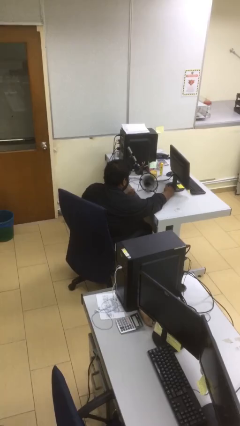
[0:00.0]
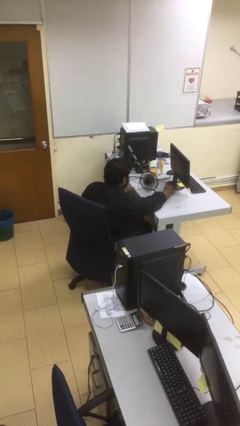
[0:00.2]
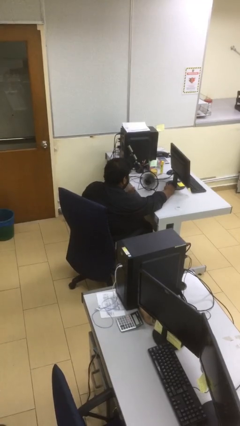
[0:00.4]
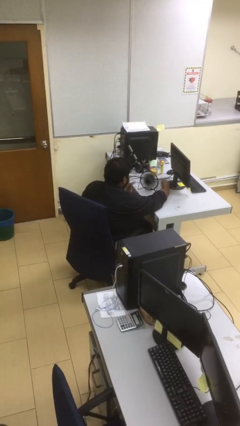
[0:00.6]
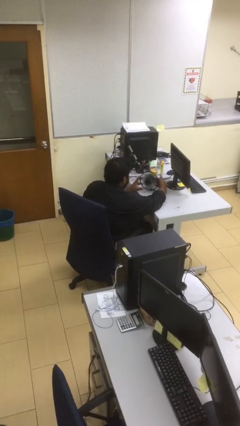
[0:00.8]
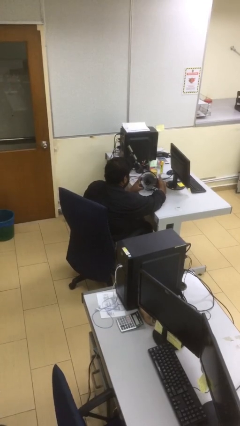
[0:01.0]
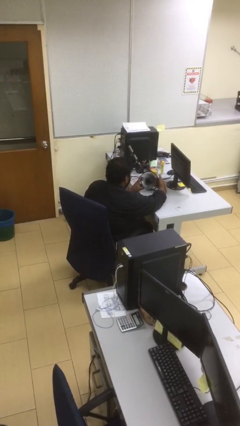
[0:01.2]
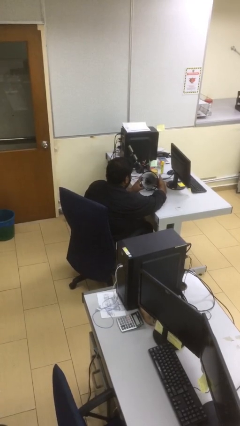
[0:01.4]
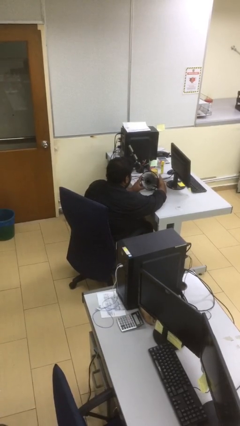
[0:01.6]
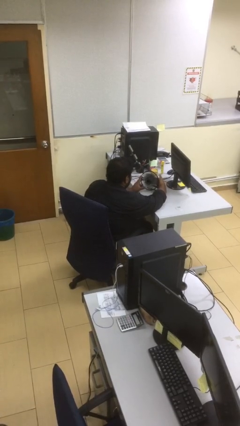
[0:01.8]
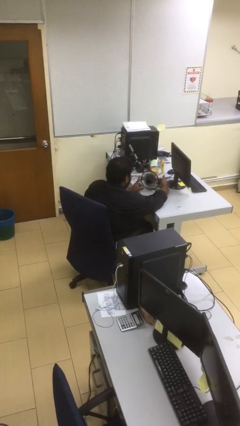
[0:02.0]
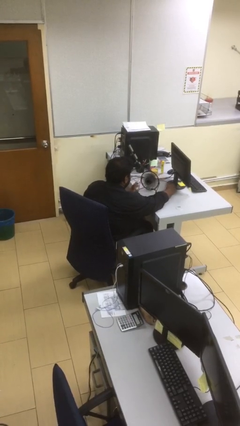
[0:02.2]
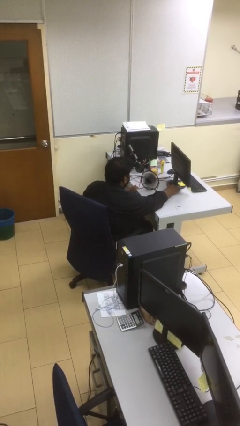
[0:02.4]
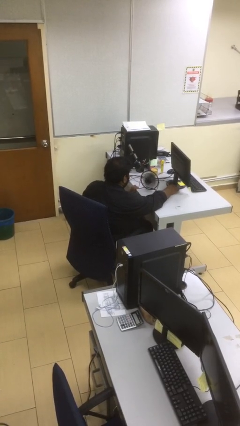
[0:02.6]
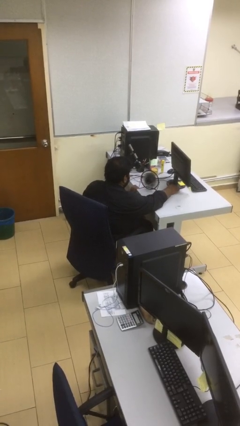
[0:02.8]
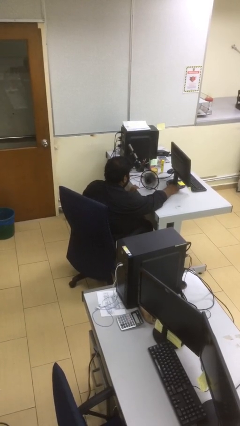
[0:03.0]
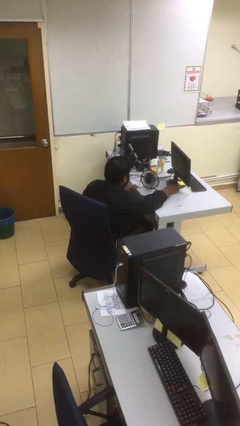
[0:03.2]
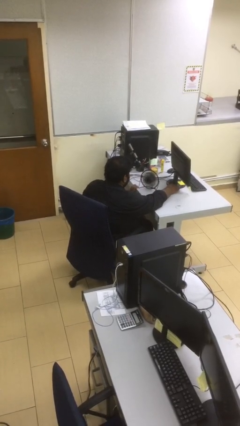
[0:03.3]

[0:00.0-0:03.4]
person turns off fan

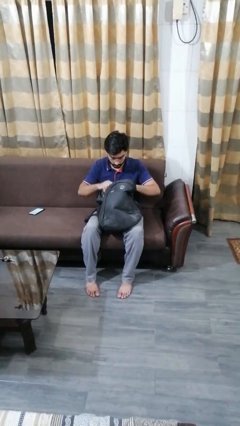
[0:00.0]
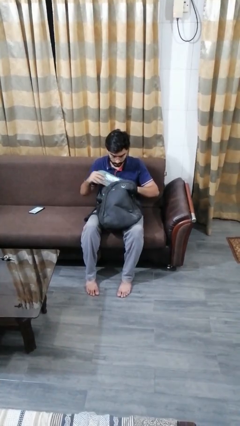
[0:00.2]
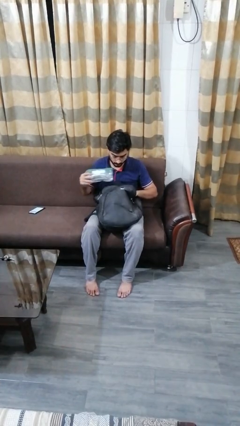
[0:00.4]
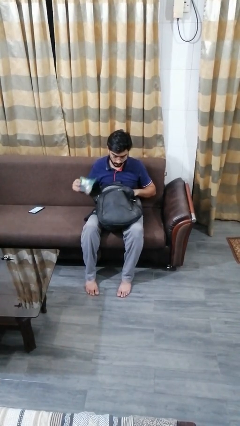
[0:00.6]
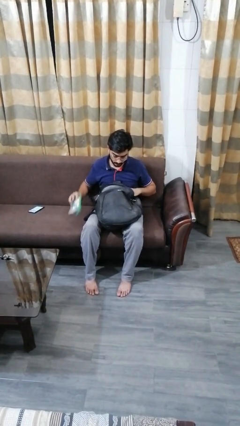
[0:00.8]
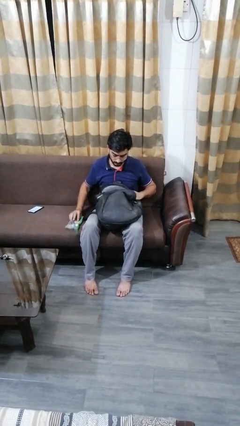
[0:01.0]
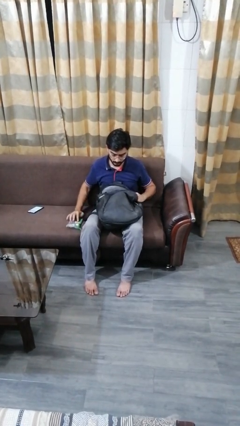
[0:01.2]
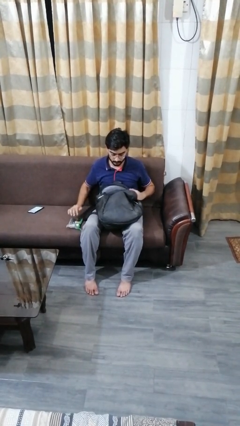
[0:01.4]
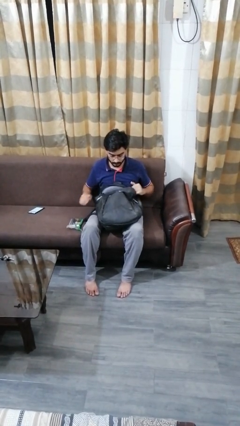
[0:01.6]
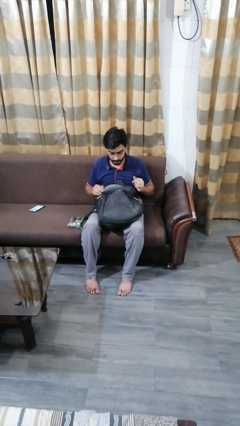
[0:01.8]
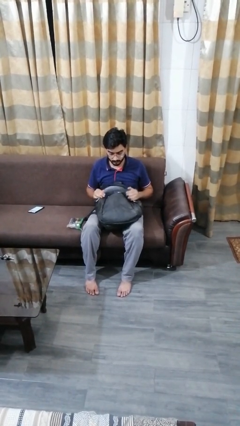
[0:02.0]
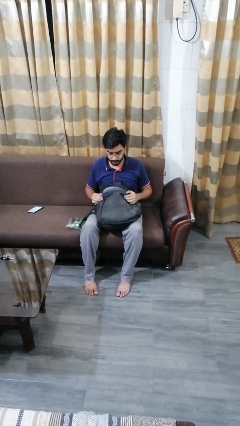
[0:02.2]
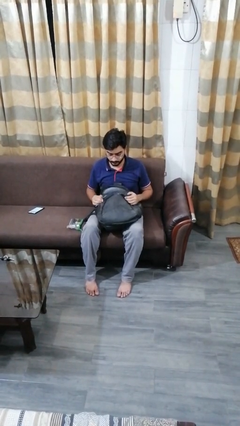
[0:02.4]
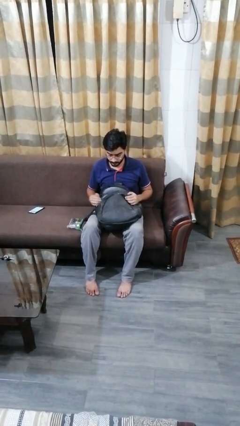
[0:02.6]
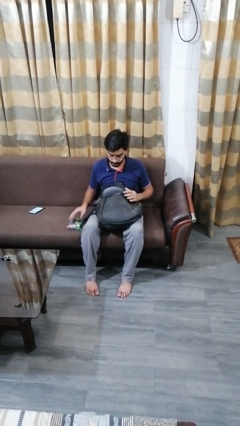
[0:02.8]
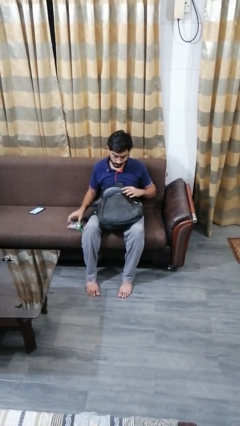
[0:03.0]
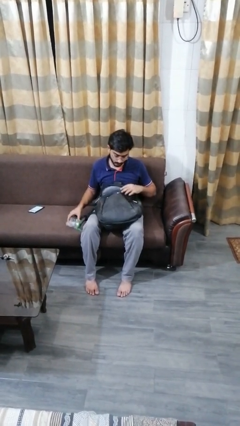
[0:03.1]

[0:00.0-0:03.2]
person takes object from backpack

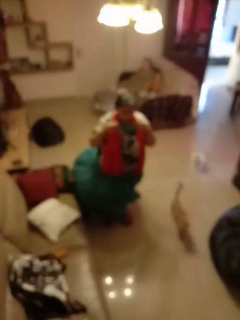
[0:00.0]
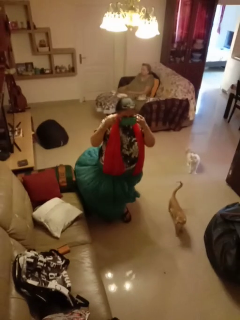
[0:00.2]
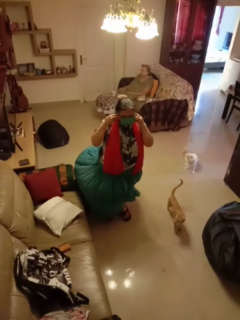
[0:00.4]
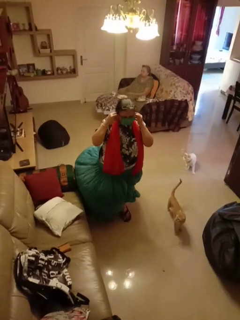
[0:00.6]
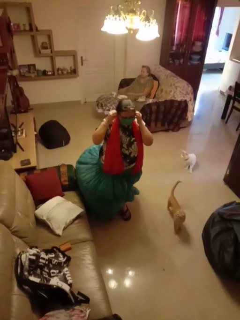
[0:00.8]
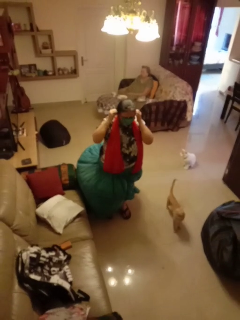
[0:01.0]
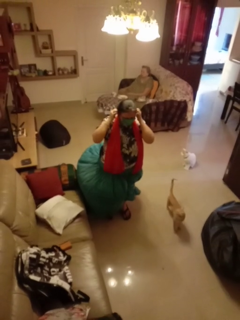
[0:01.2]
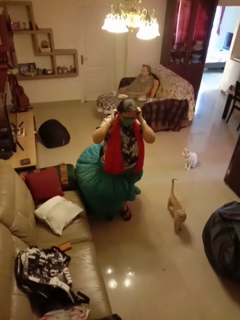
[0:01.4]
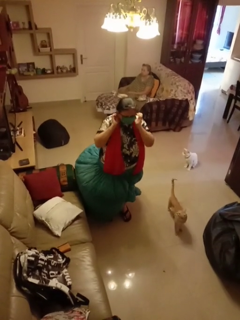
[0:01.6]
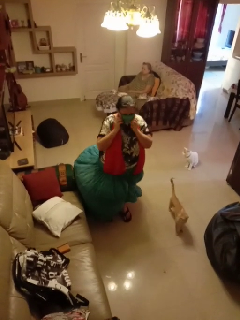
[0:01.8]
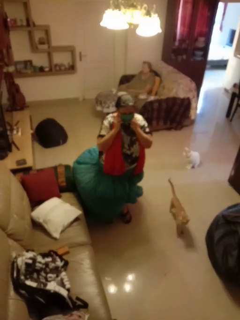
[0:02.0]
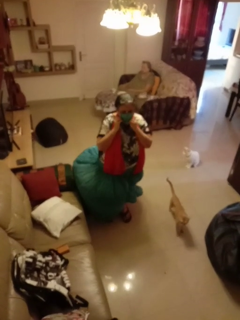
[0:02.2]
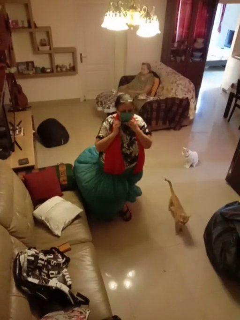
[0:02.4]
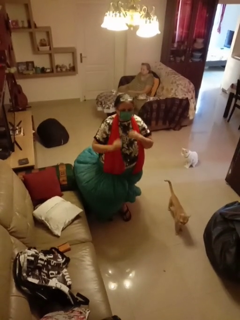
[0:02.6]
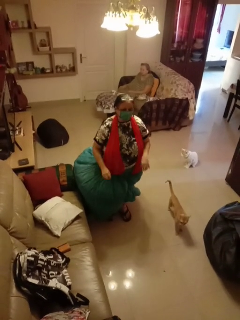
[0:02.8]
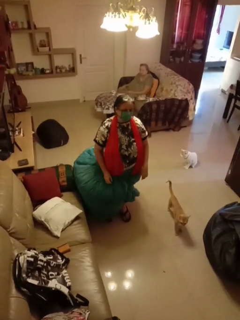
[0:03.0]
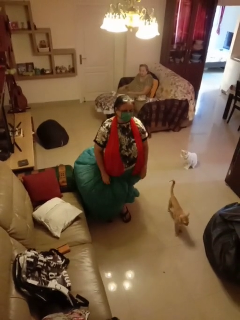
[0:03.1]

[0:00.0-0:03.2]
person puts on facemask

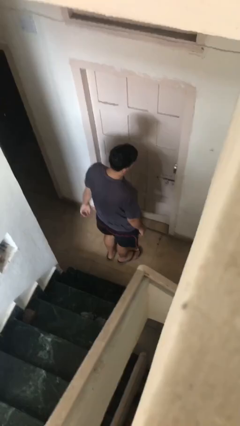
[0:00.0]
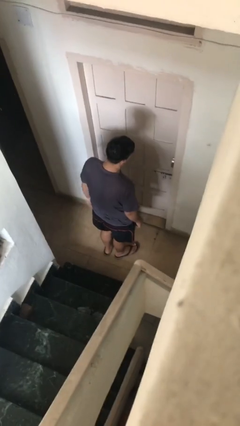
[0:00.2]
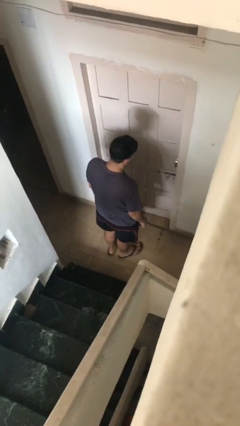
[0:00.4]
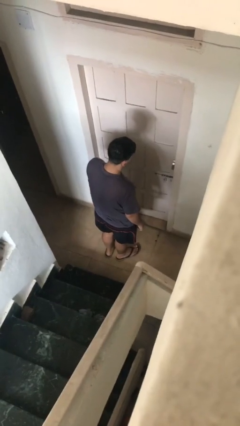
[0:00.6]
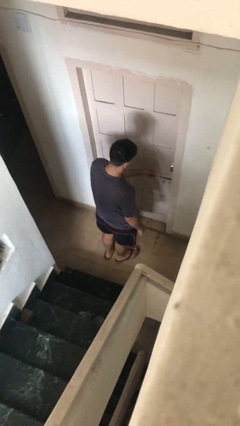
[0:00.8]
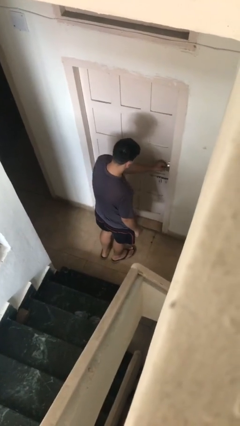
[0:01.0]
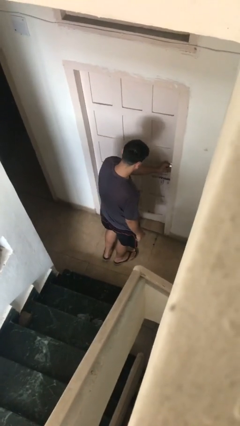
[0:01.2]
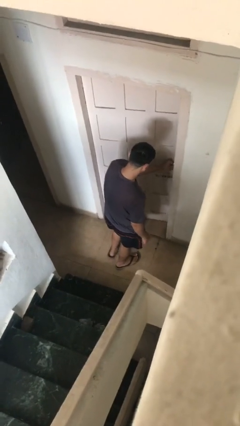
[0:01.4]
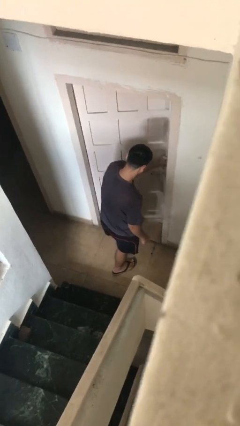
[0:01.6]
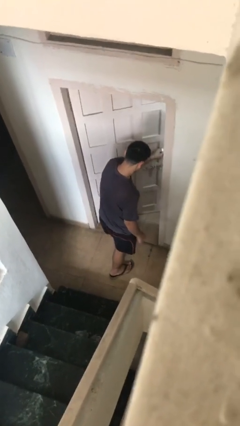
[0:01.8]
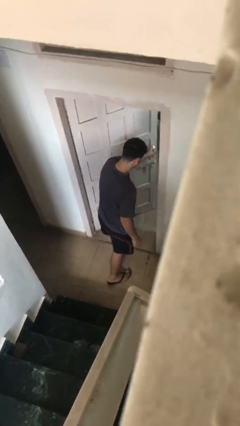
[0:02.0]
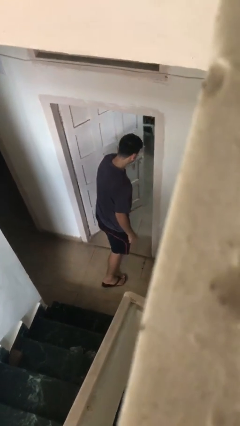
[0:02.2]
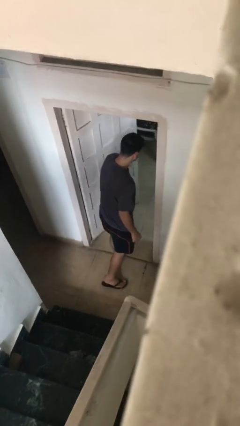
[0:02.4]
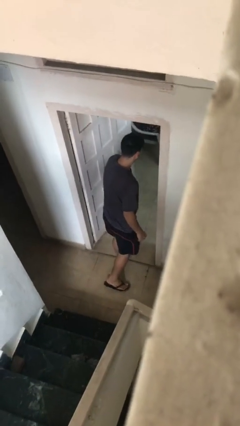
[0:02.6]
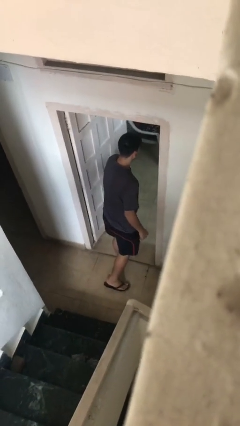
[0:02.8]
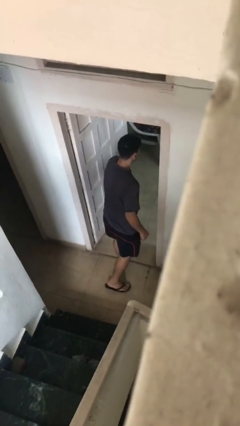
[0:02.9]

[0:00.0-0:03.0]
person opens facility door

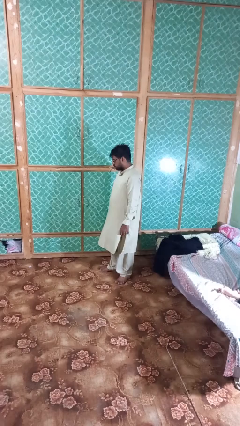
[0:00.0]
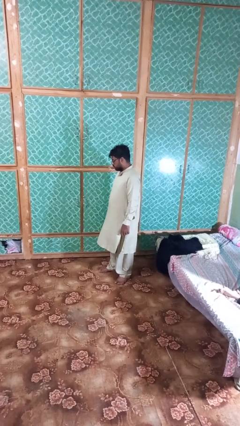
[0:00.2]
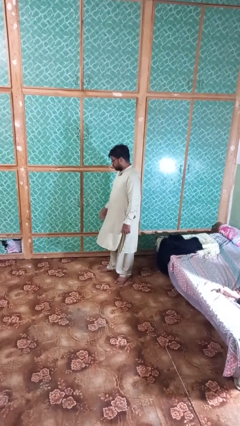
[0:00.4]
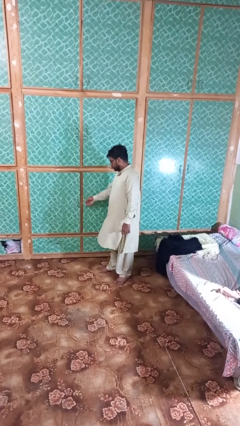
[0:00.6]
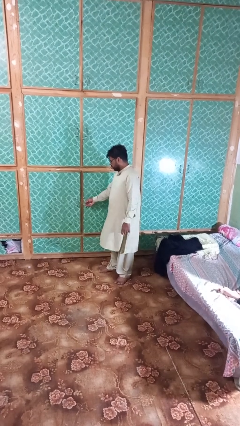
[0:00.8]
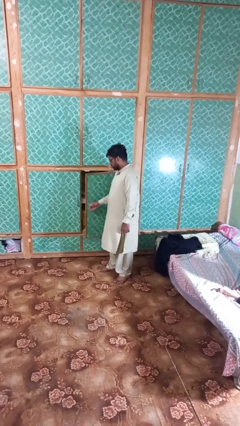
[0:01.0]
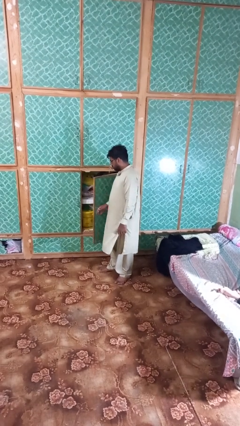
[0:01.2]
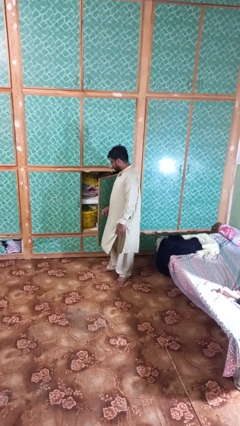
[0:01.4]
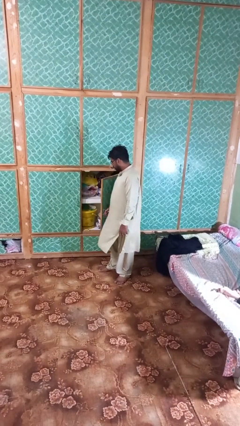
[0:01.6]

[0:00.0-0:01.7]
person opens closet door

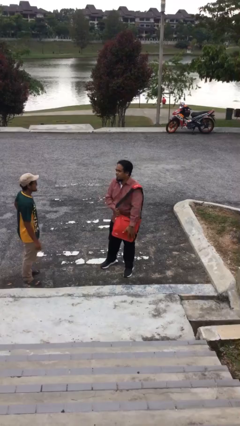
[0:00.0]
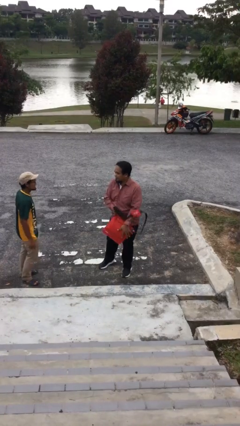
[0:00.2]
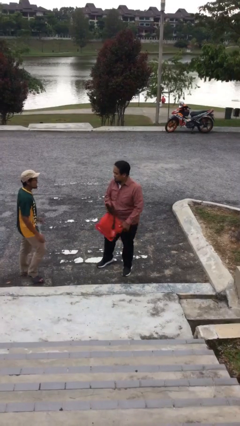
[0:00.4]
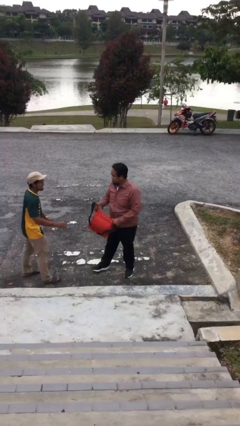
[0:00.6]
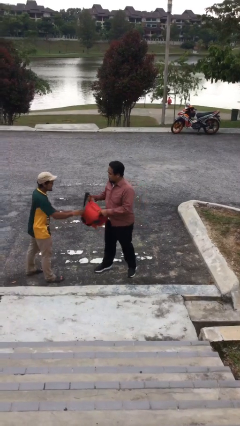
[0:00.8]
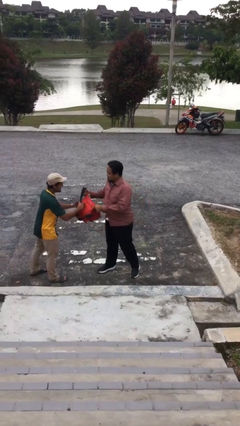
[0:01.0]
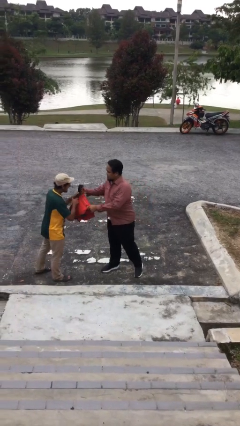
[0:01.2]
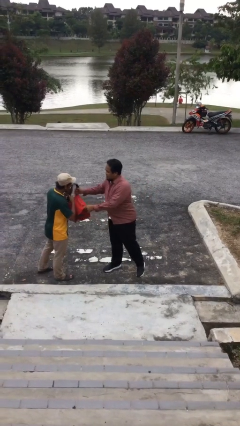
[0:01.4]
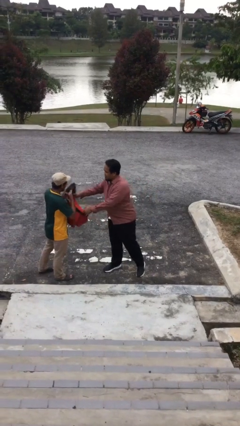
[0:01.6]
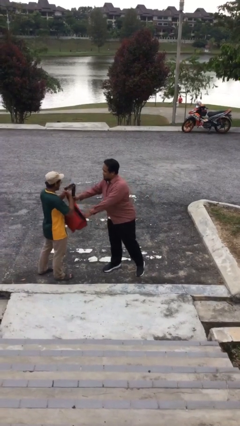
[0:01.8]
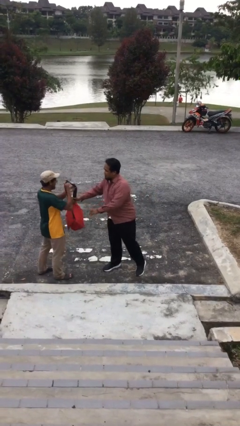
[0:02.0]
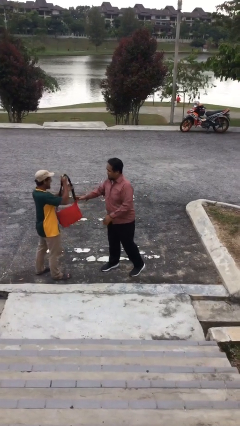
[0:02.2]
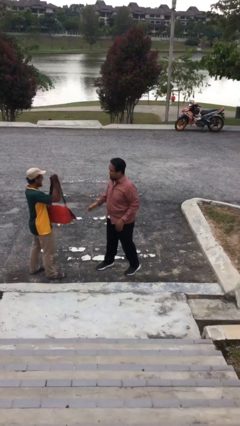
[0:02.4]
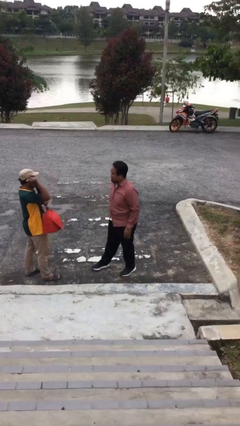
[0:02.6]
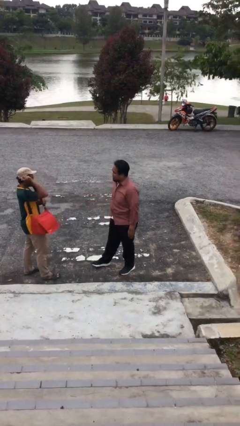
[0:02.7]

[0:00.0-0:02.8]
person transfers object to person

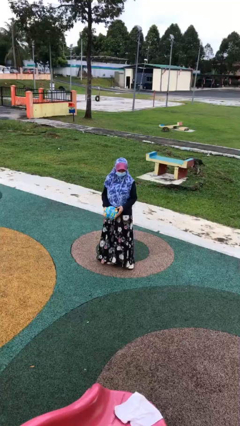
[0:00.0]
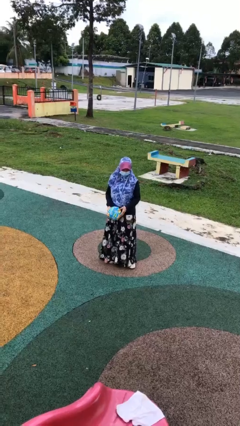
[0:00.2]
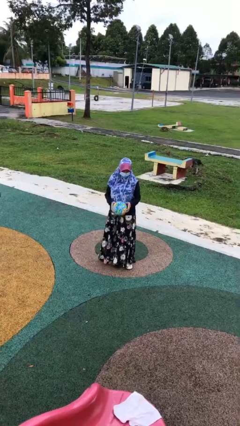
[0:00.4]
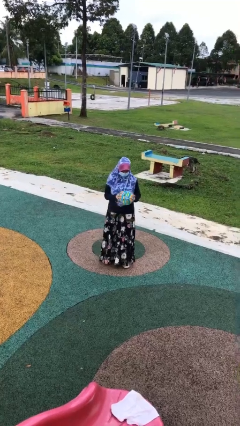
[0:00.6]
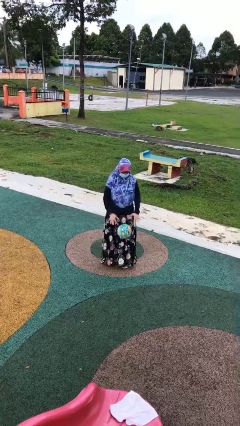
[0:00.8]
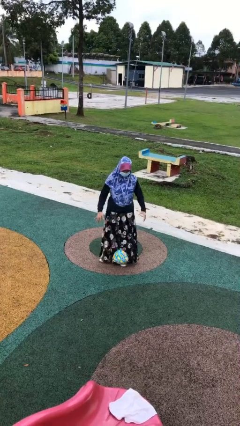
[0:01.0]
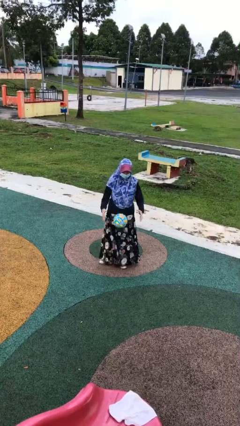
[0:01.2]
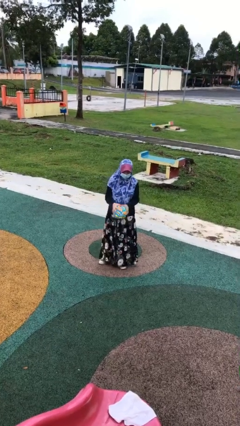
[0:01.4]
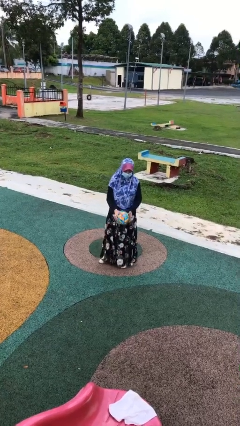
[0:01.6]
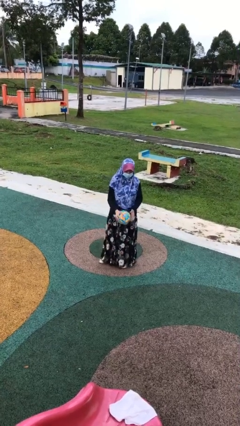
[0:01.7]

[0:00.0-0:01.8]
person bounces ball on floor
